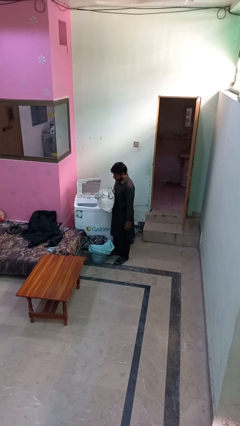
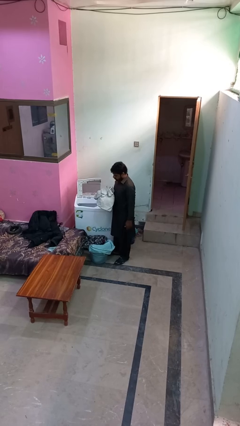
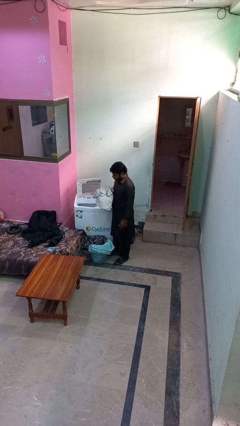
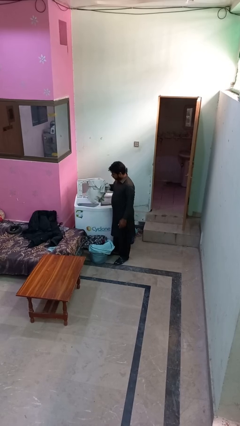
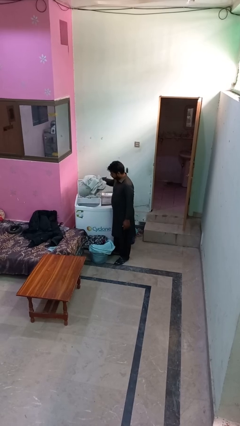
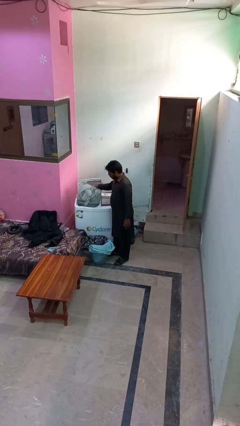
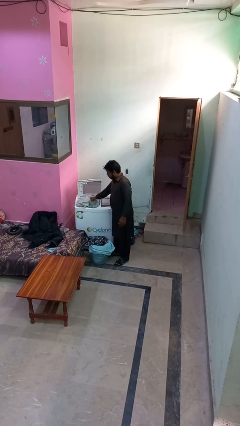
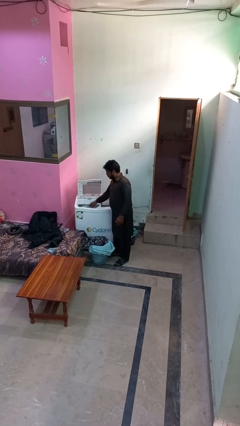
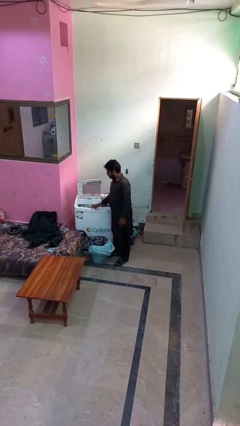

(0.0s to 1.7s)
person loads clotheswasher

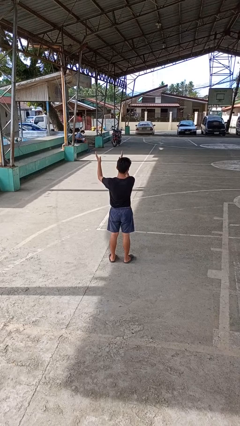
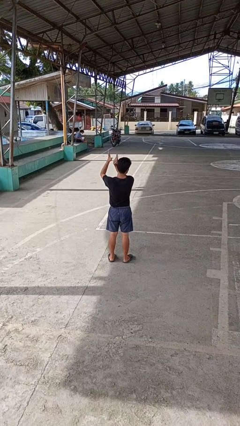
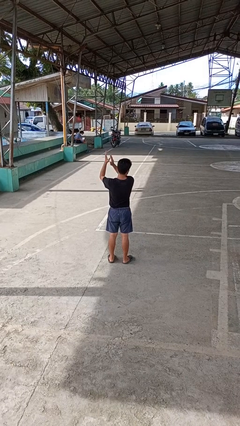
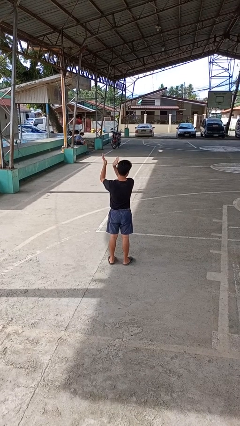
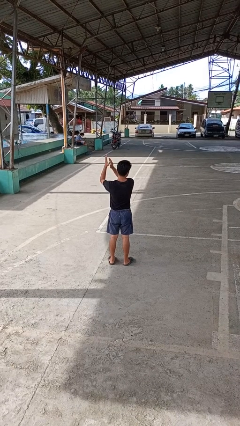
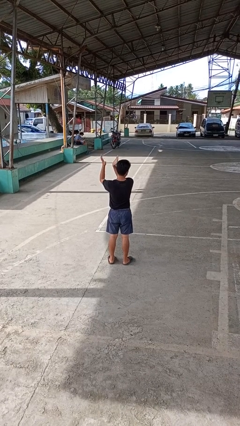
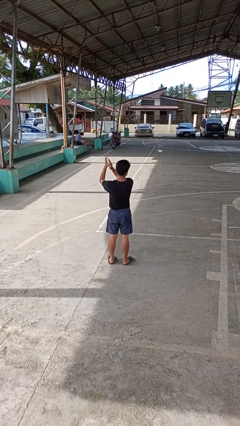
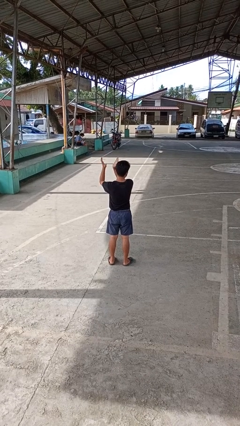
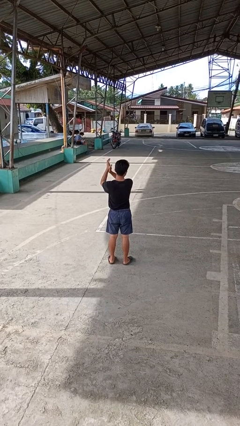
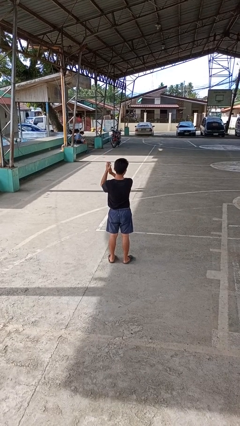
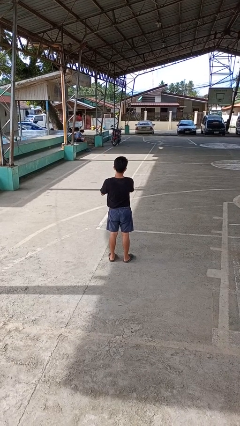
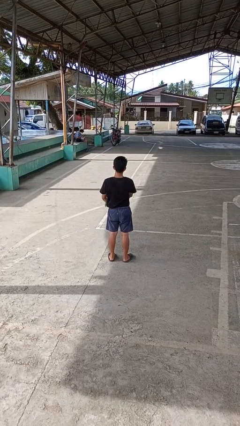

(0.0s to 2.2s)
person claps hands

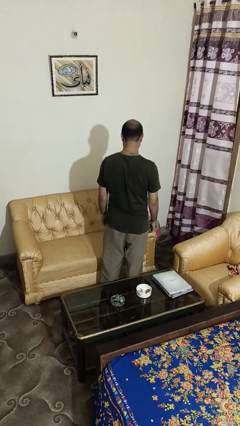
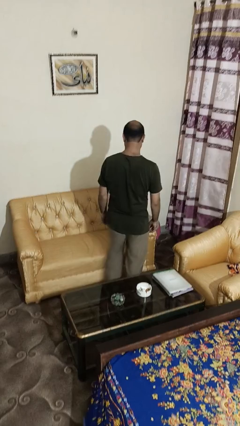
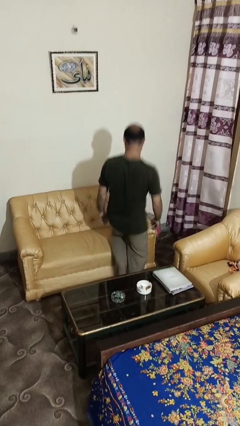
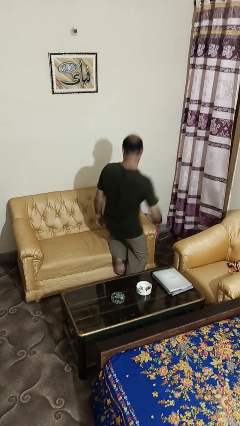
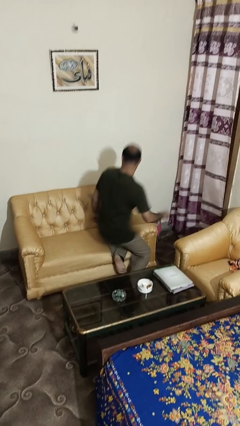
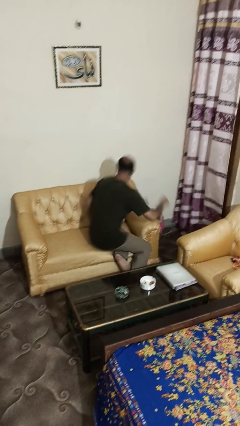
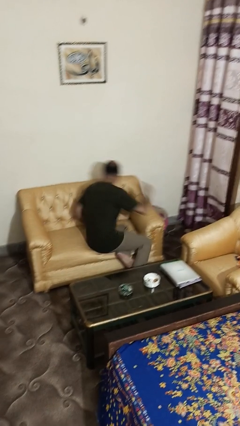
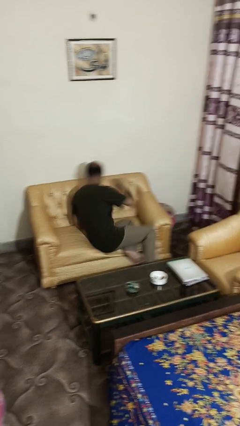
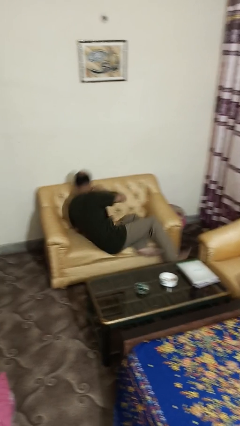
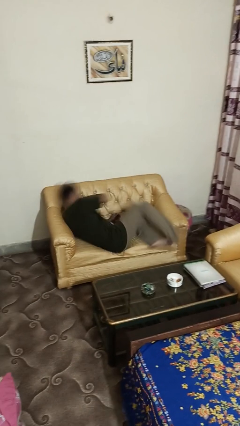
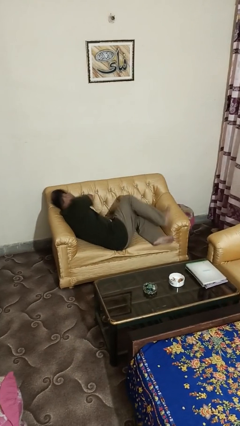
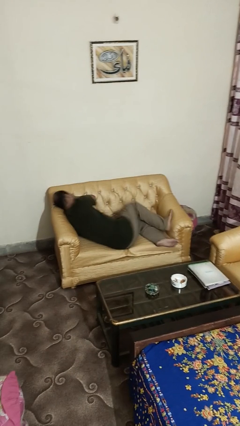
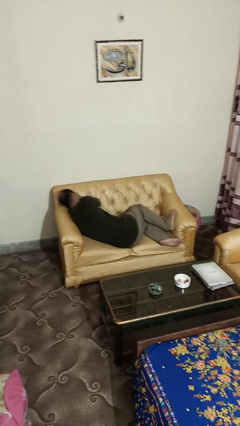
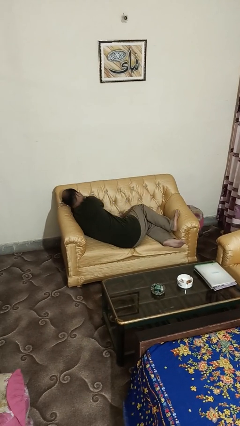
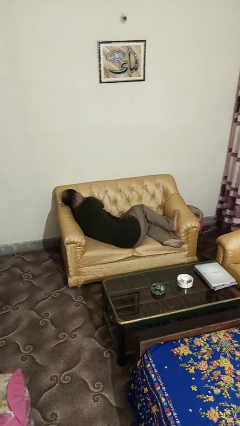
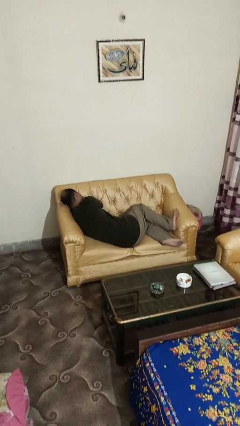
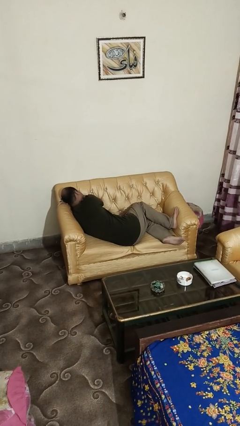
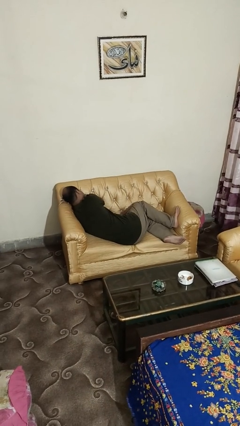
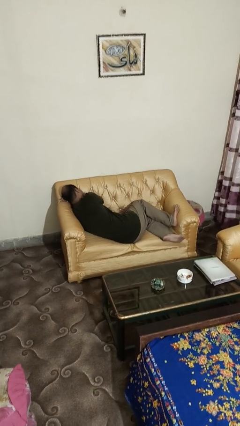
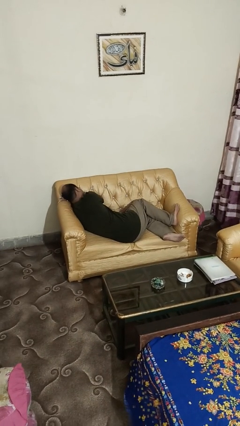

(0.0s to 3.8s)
person lies down on couch

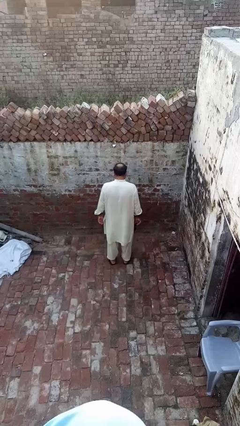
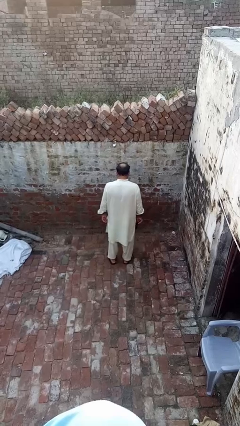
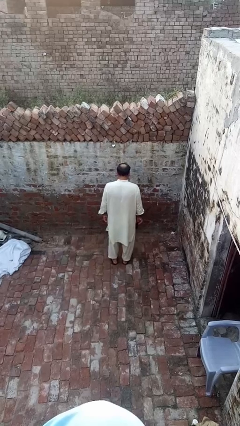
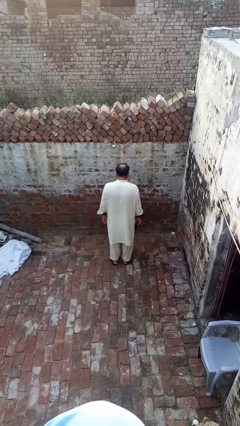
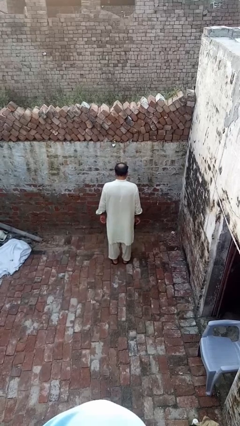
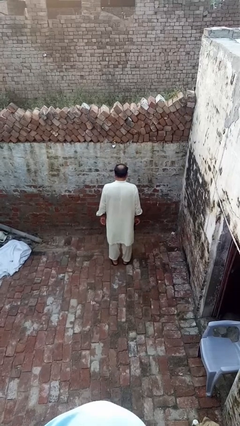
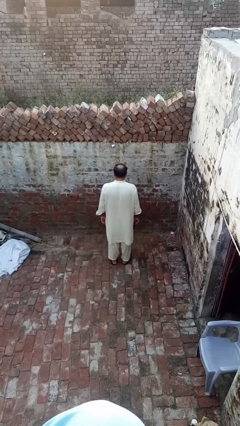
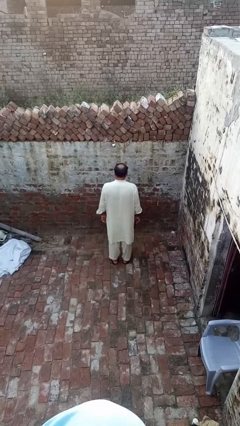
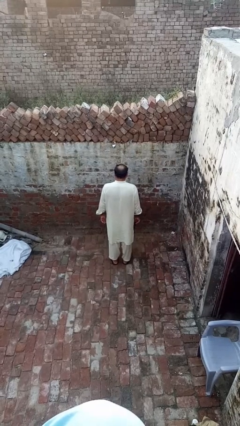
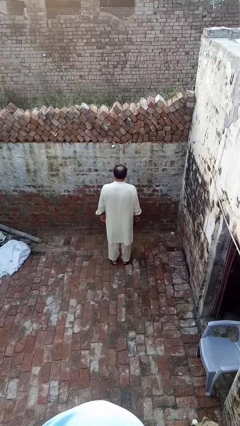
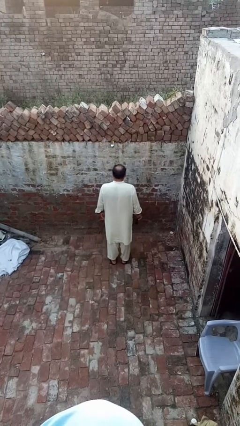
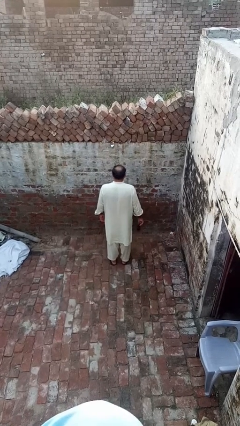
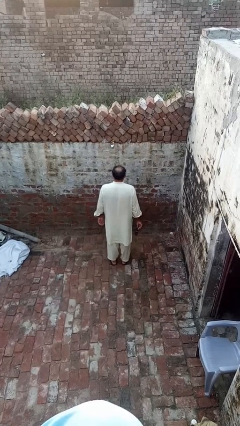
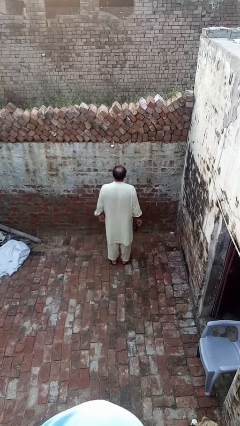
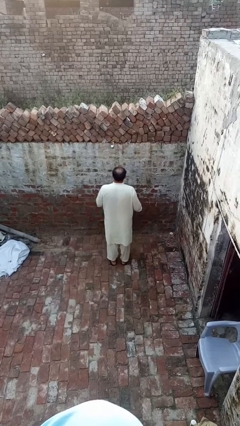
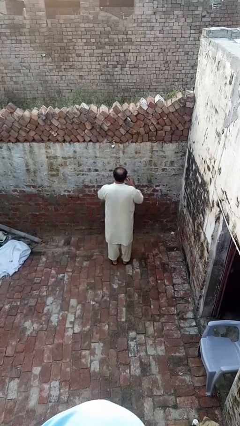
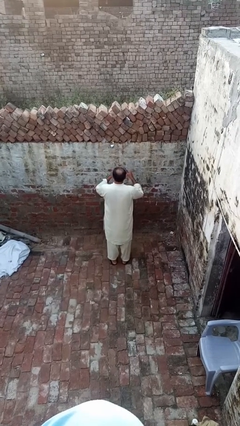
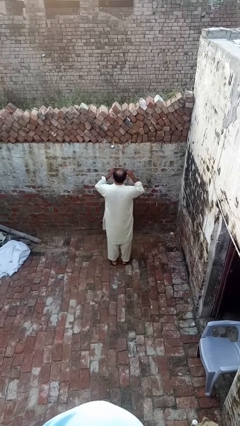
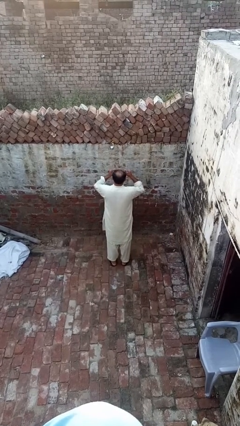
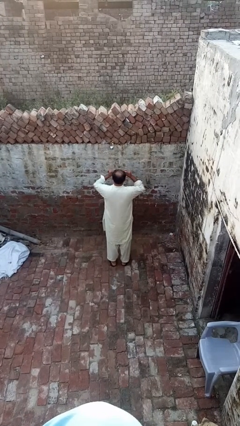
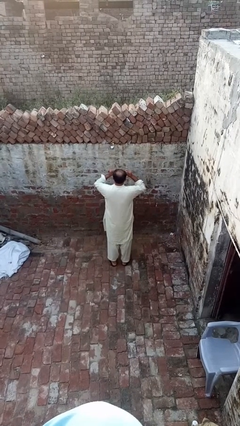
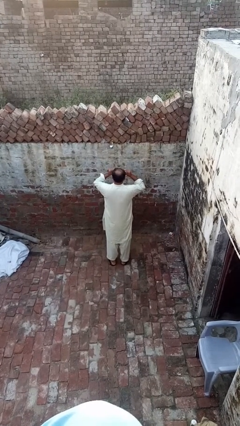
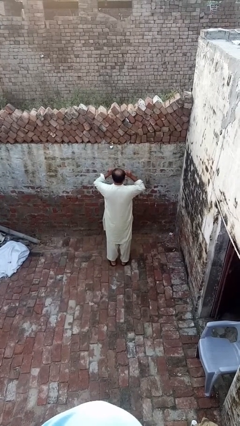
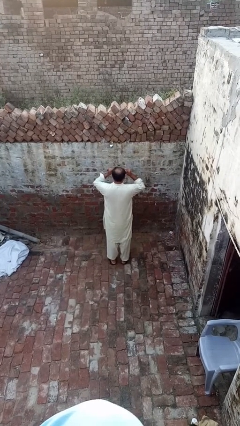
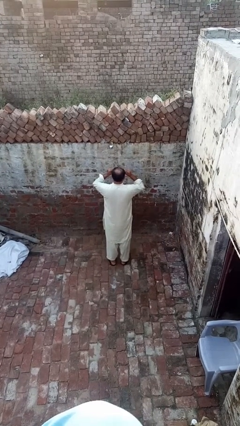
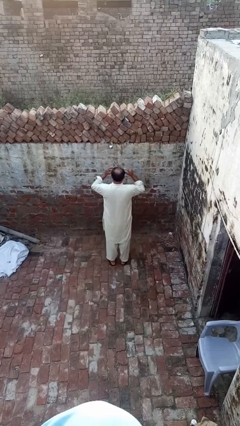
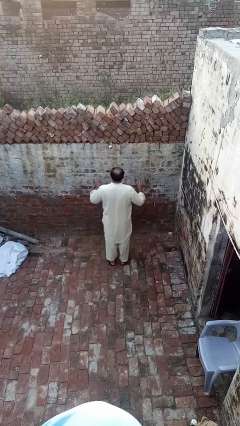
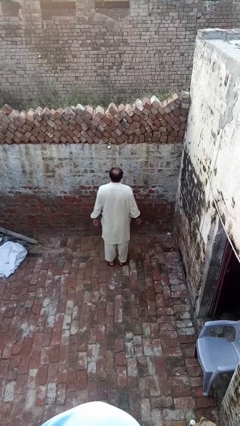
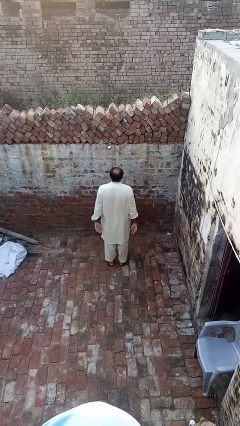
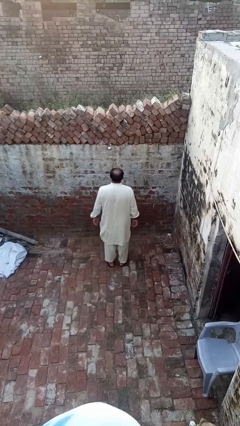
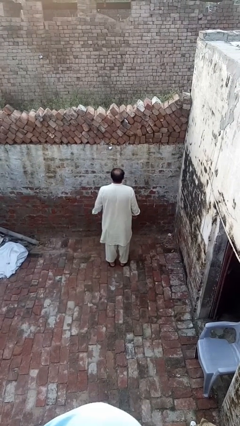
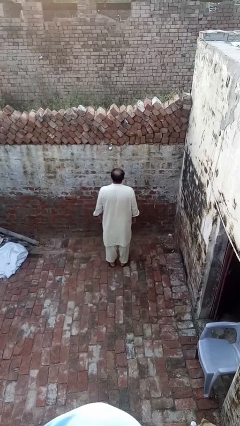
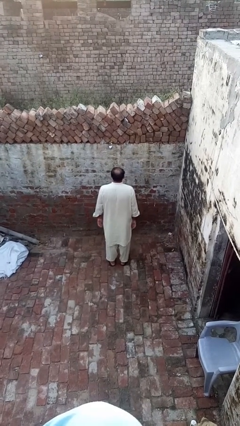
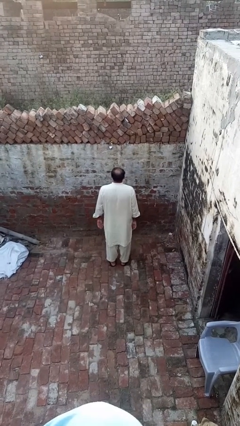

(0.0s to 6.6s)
person puts on sunglasses

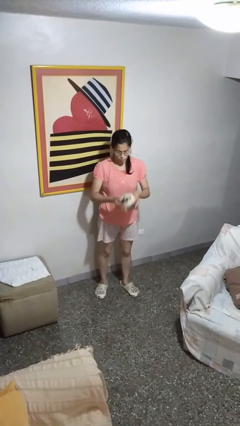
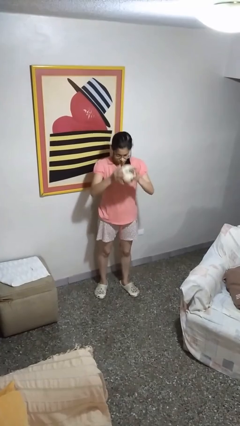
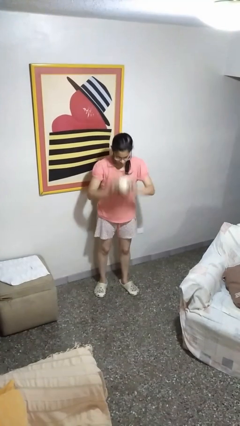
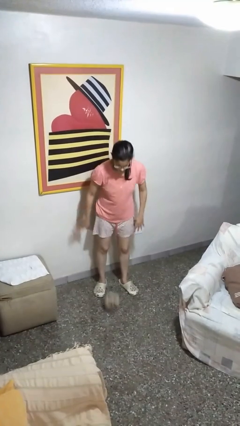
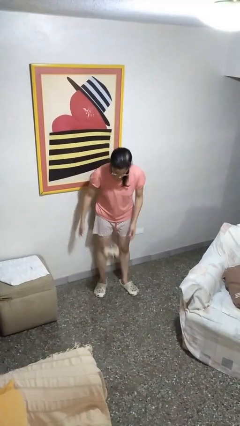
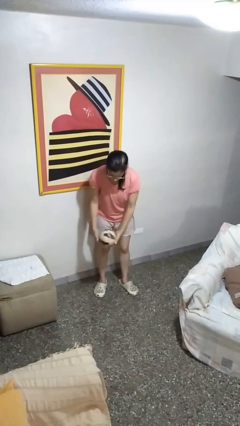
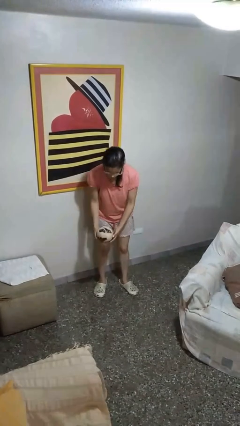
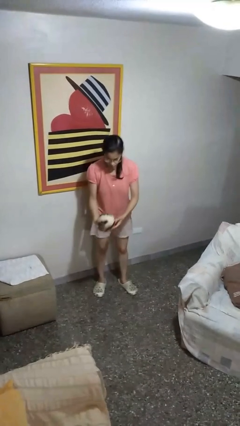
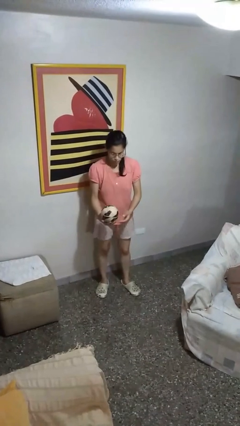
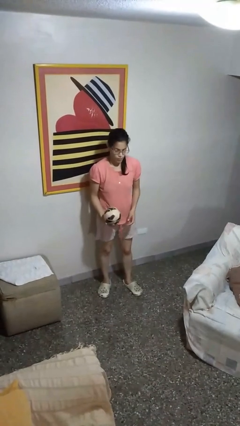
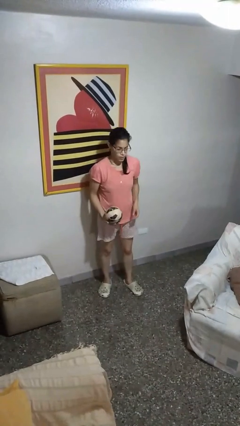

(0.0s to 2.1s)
person bounces ball on floor

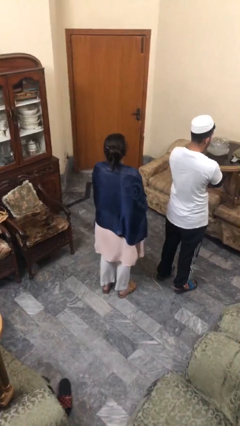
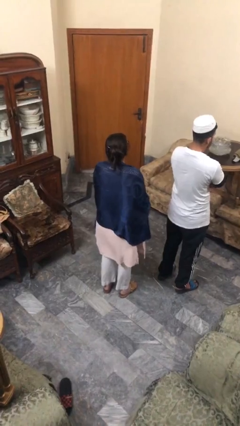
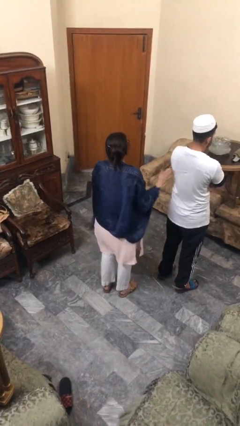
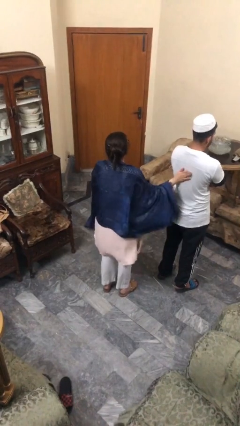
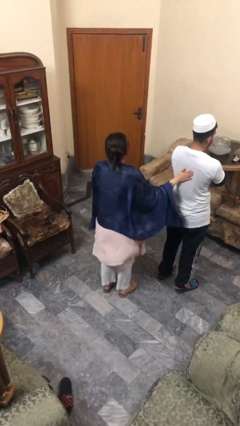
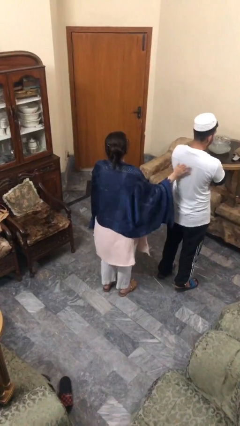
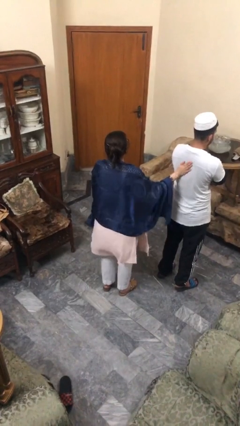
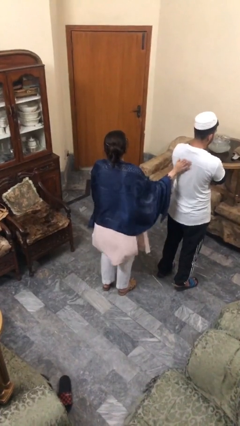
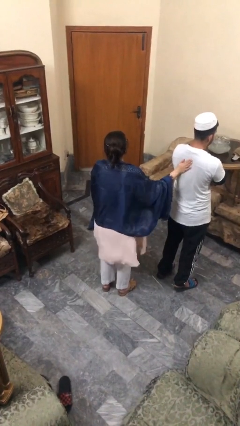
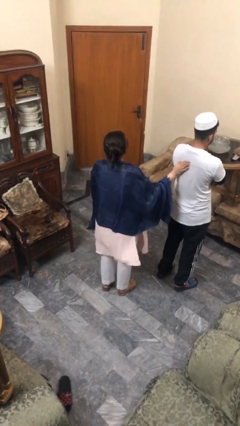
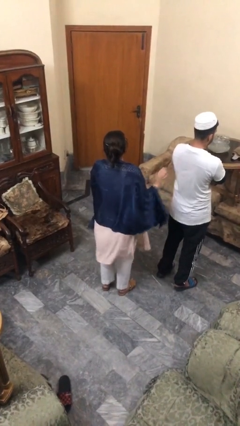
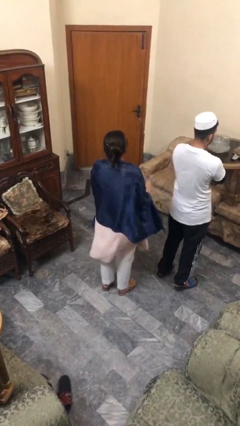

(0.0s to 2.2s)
person touches back of person
